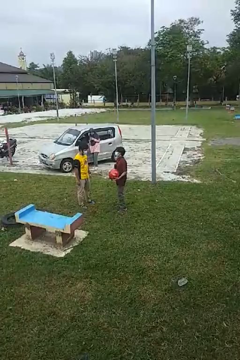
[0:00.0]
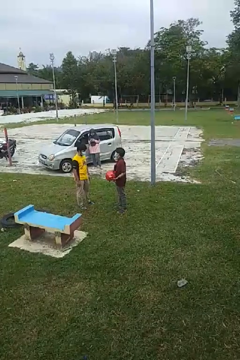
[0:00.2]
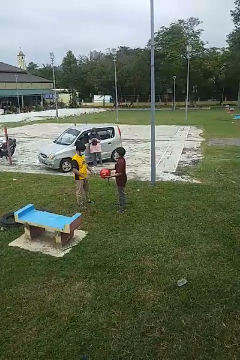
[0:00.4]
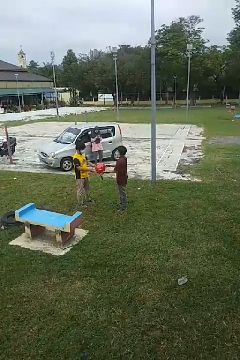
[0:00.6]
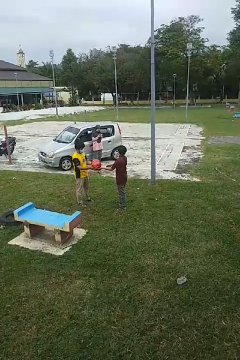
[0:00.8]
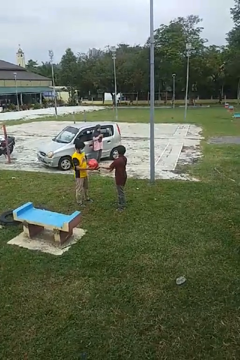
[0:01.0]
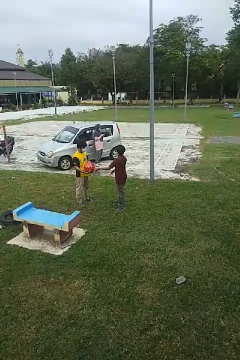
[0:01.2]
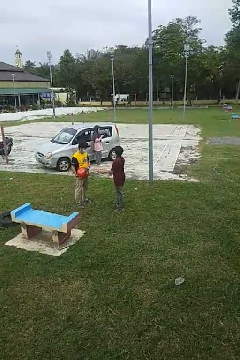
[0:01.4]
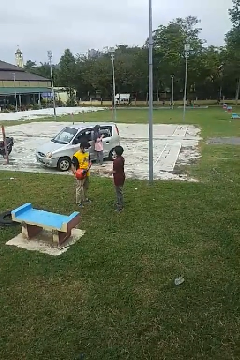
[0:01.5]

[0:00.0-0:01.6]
person transfers object to person

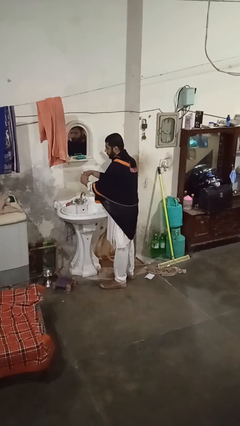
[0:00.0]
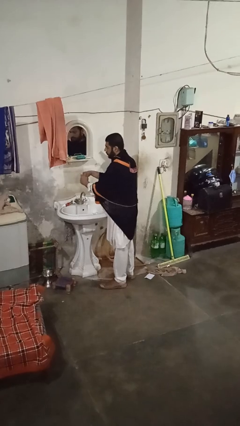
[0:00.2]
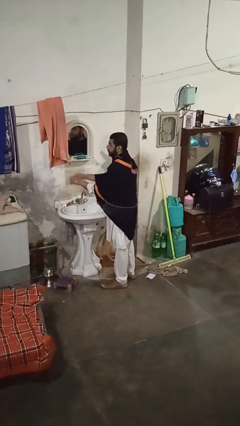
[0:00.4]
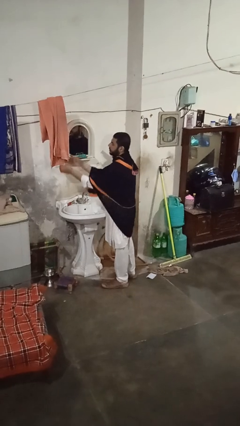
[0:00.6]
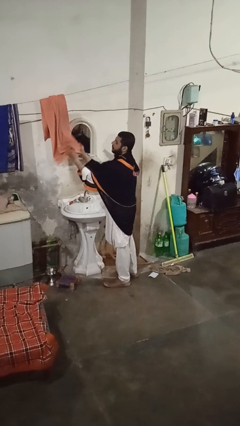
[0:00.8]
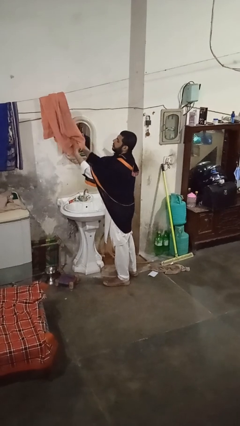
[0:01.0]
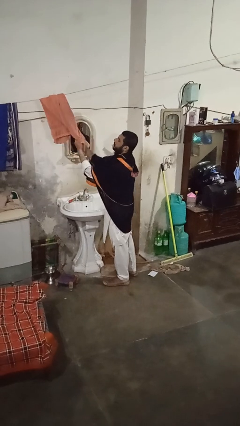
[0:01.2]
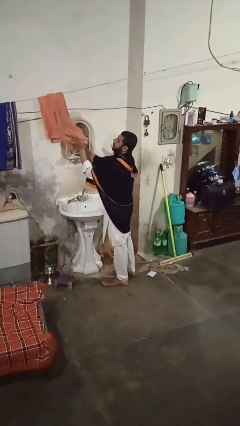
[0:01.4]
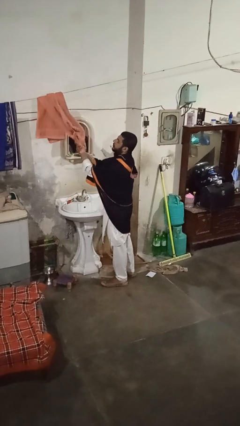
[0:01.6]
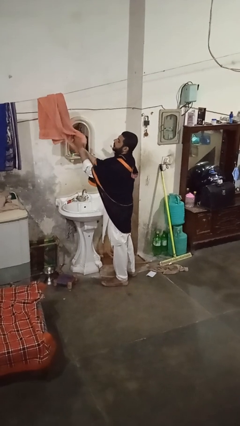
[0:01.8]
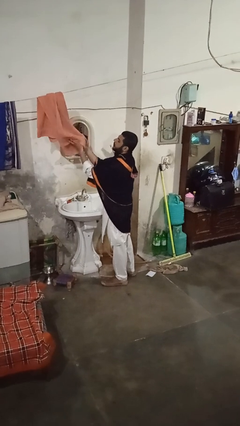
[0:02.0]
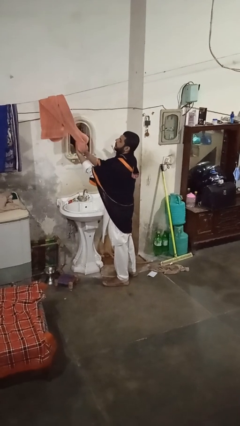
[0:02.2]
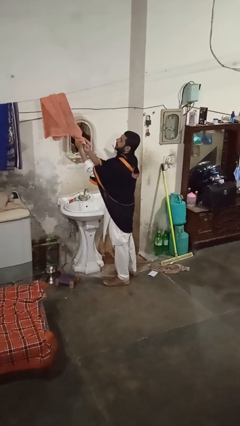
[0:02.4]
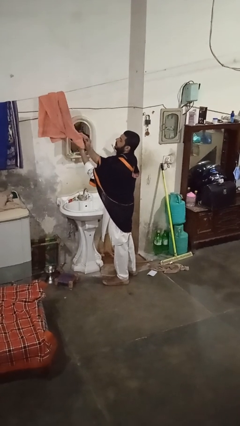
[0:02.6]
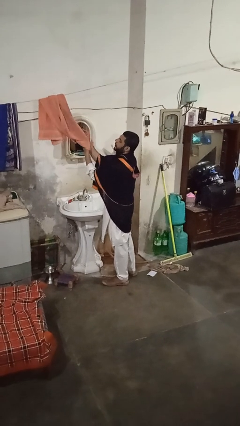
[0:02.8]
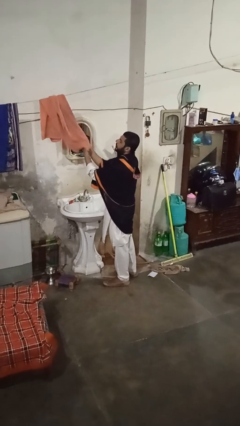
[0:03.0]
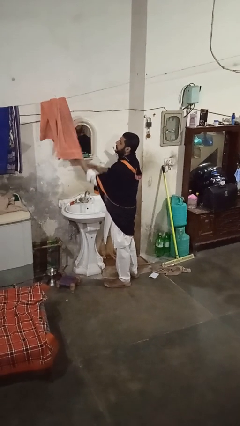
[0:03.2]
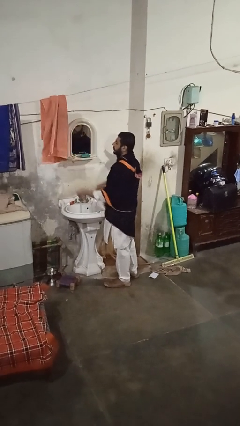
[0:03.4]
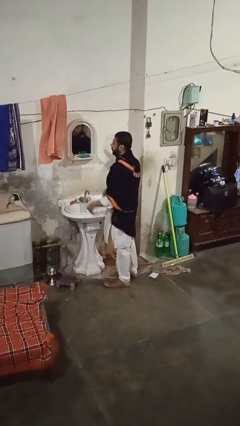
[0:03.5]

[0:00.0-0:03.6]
person dries hands with towel

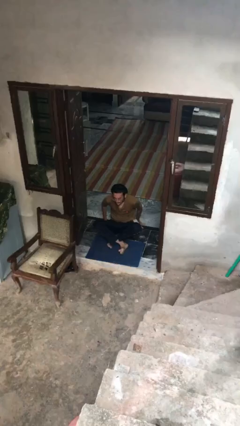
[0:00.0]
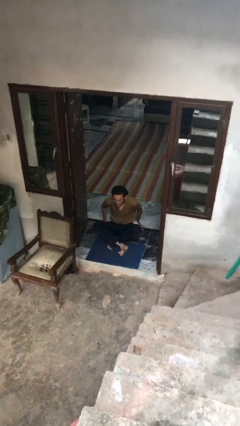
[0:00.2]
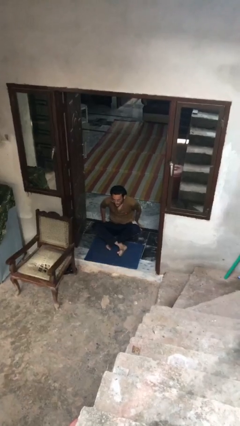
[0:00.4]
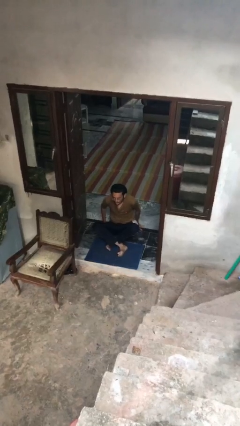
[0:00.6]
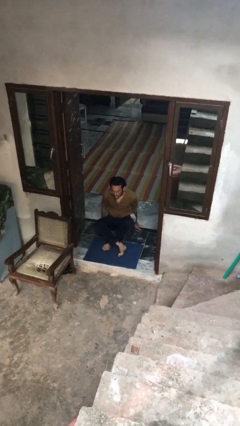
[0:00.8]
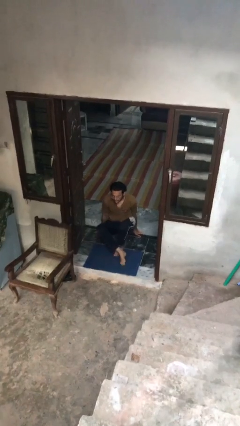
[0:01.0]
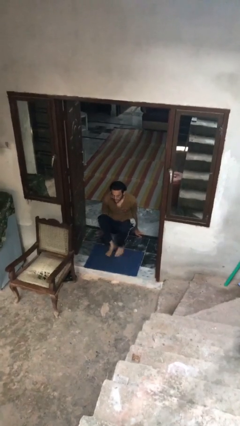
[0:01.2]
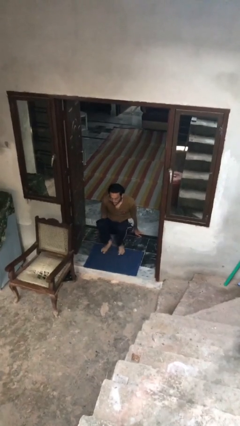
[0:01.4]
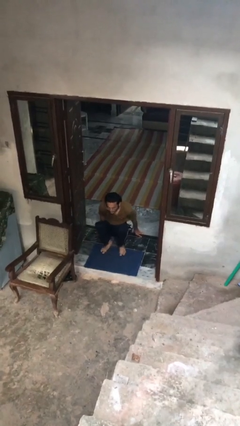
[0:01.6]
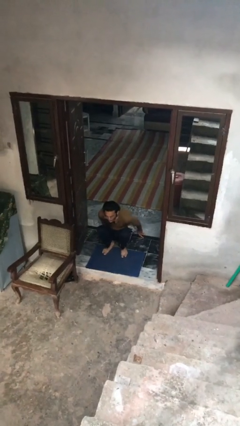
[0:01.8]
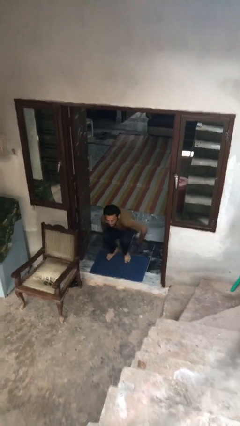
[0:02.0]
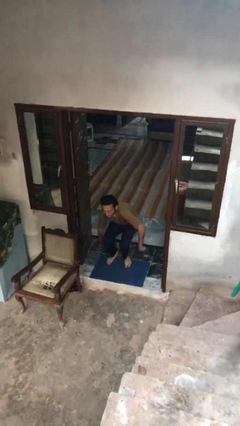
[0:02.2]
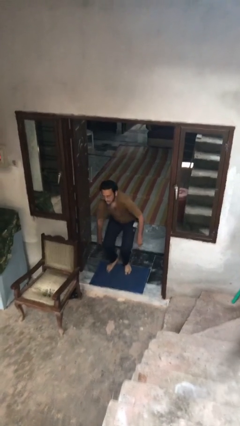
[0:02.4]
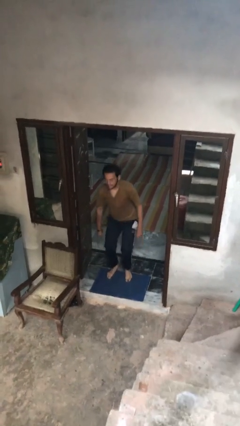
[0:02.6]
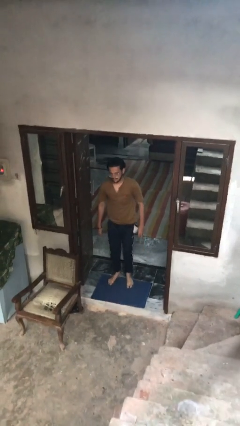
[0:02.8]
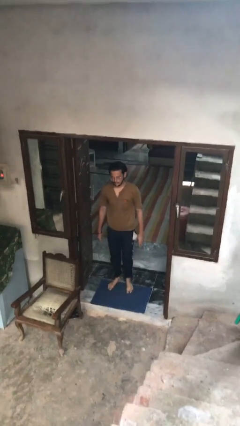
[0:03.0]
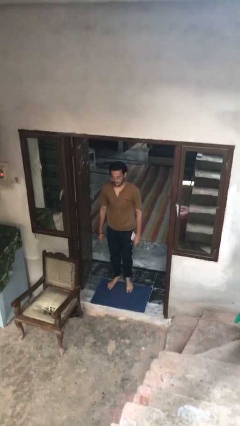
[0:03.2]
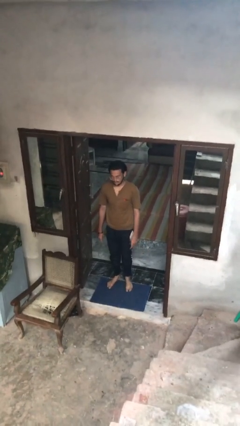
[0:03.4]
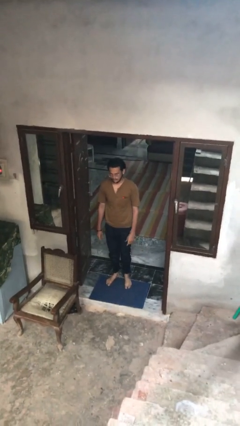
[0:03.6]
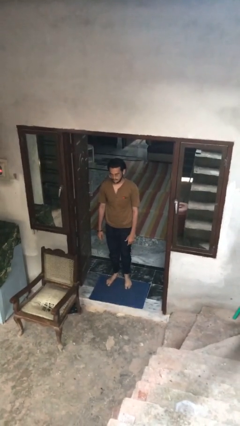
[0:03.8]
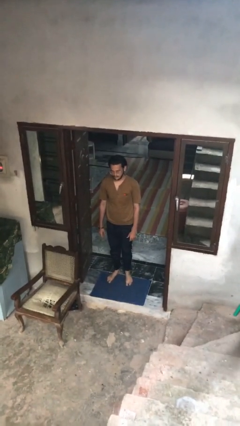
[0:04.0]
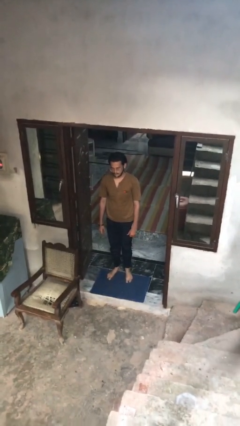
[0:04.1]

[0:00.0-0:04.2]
person stands up from floor

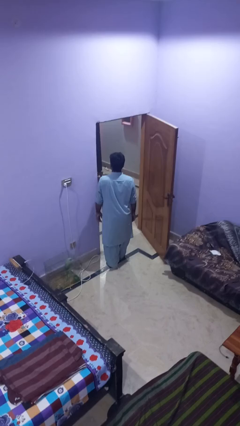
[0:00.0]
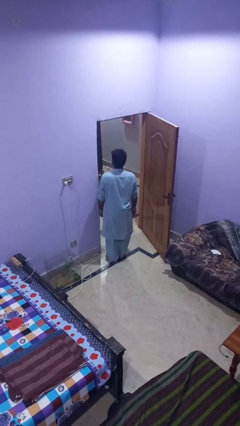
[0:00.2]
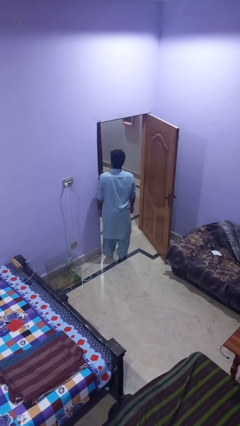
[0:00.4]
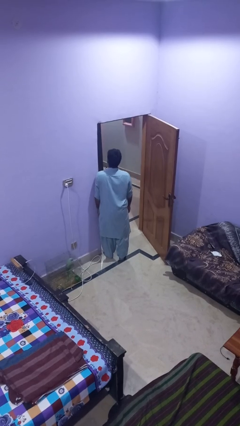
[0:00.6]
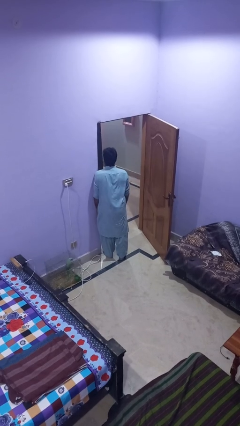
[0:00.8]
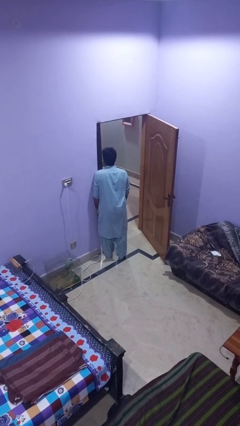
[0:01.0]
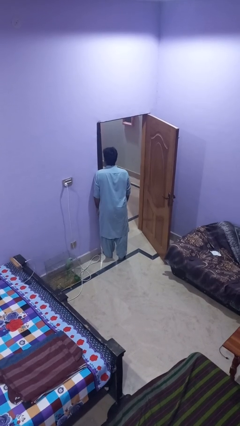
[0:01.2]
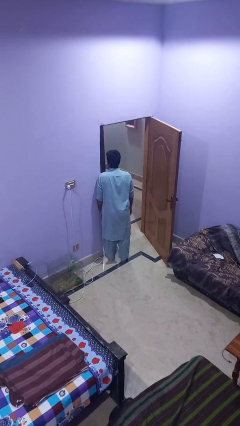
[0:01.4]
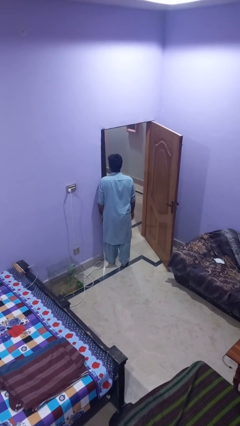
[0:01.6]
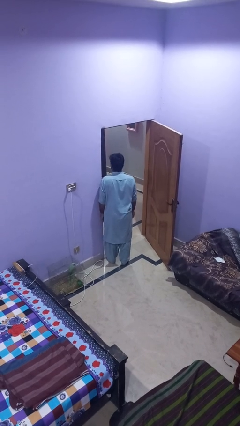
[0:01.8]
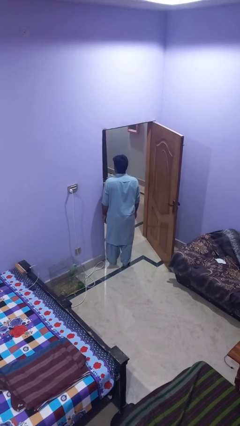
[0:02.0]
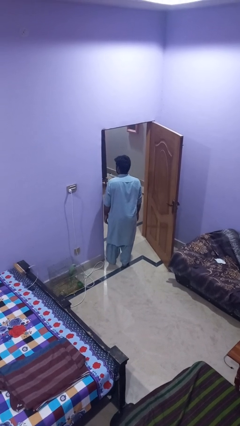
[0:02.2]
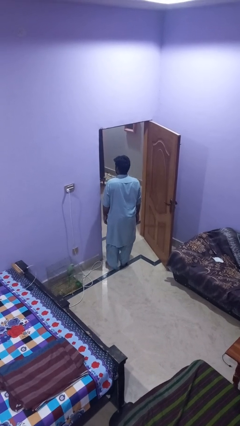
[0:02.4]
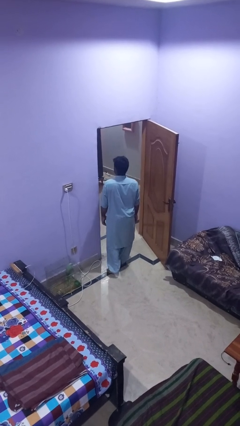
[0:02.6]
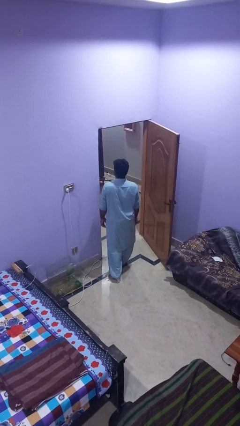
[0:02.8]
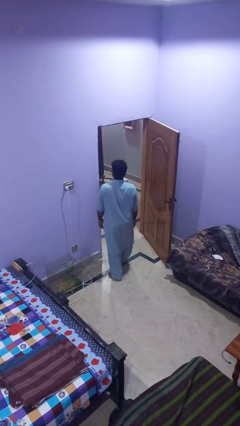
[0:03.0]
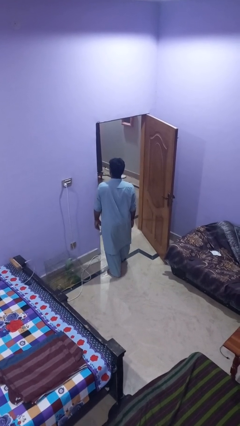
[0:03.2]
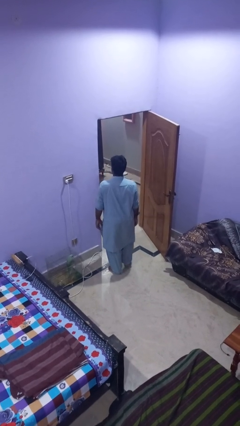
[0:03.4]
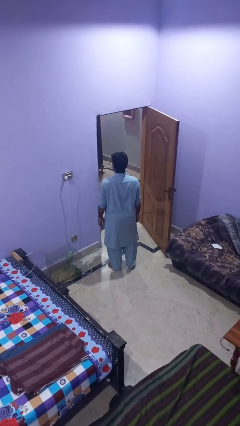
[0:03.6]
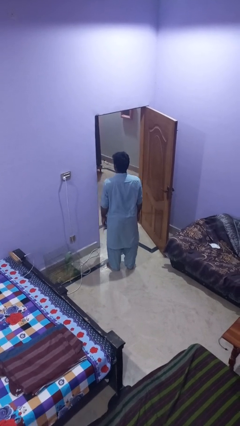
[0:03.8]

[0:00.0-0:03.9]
person bumps into wall

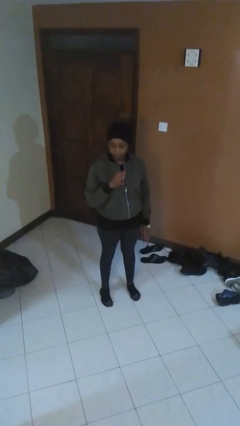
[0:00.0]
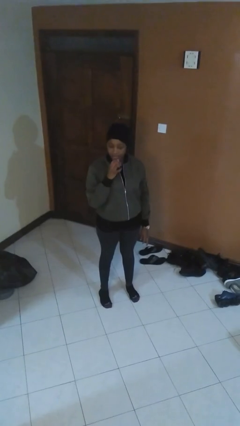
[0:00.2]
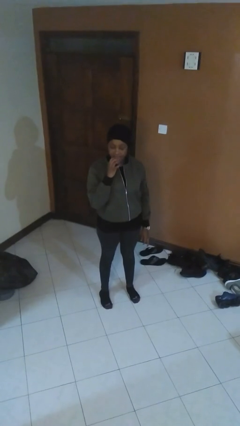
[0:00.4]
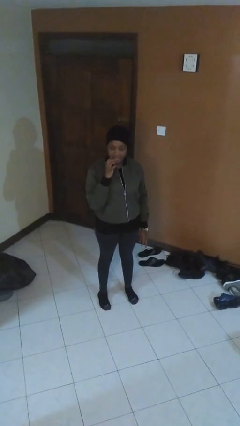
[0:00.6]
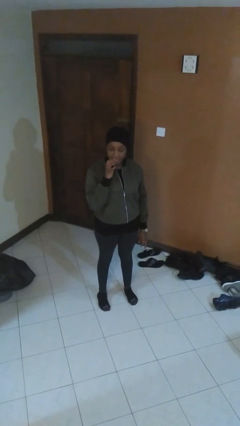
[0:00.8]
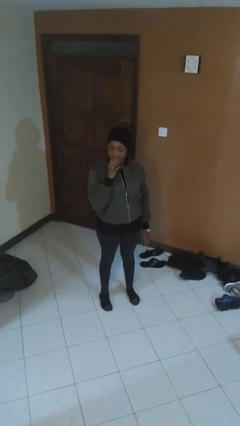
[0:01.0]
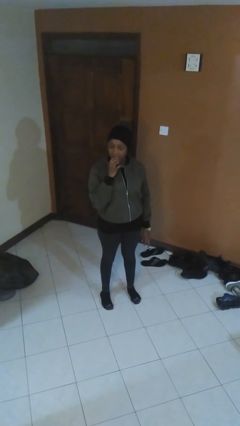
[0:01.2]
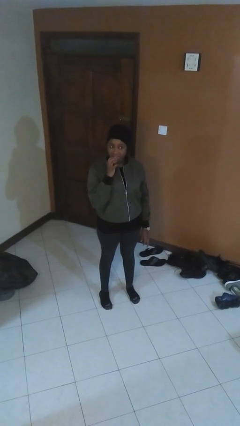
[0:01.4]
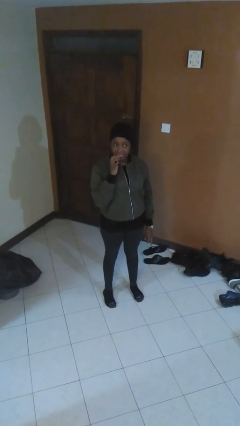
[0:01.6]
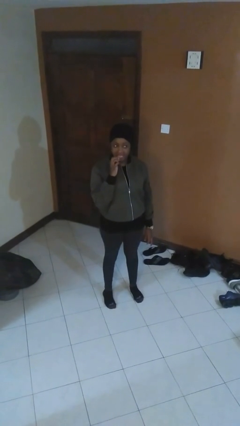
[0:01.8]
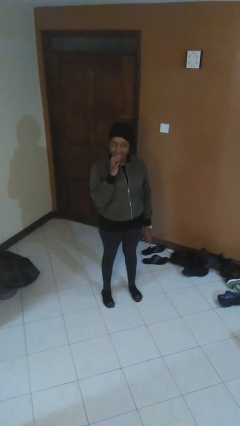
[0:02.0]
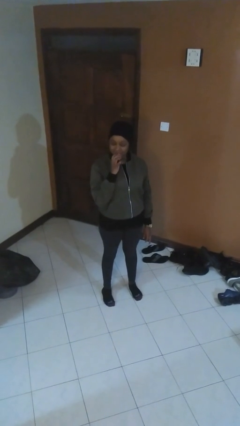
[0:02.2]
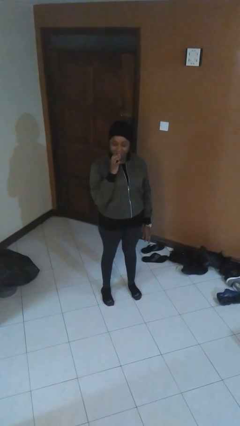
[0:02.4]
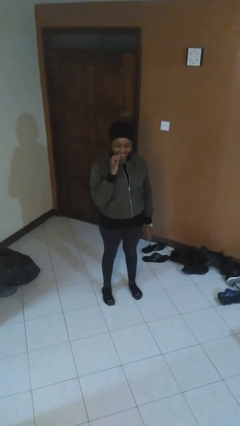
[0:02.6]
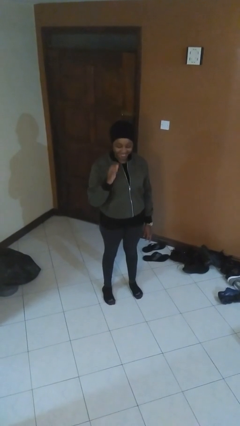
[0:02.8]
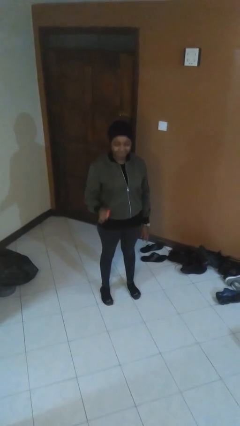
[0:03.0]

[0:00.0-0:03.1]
person applies lip makeup

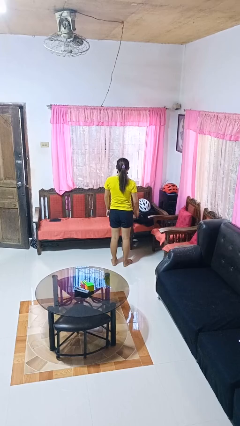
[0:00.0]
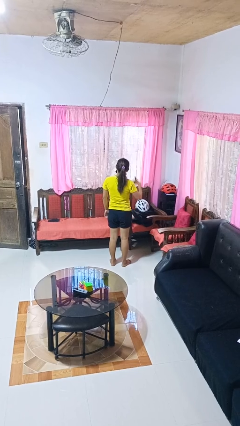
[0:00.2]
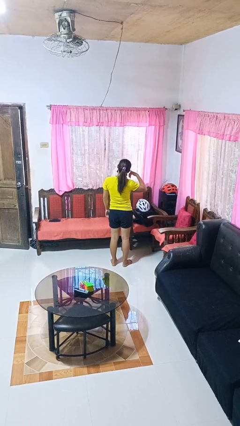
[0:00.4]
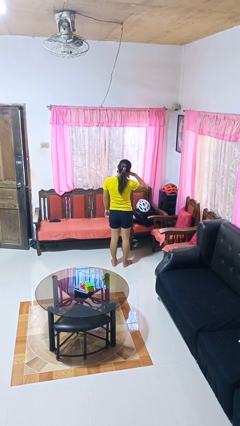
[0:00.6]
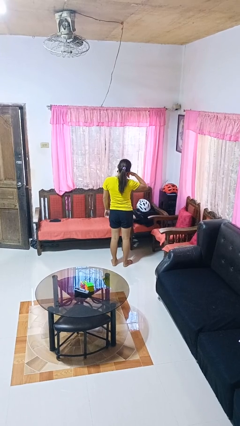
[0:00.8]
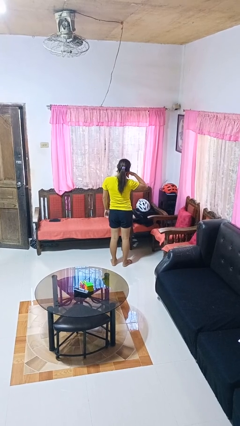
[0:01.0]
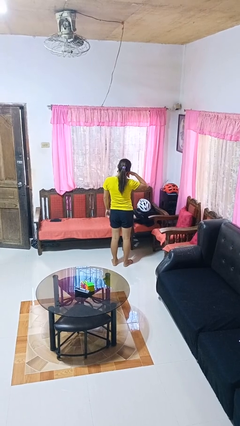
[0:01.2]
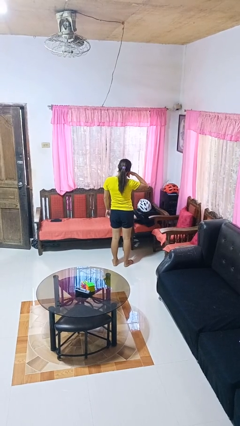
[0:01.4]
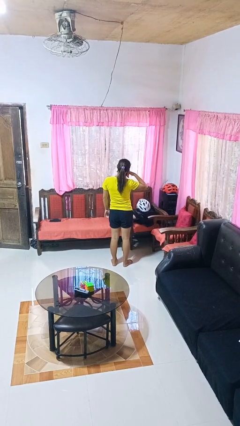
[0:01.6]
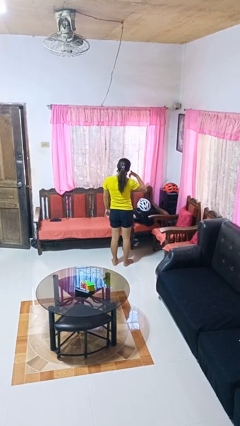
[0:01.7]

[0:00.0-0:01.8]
person gestures call me
